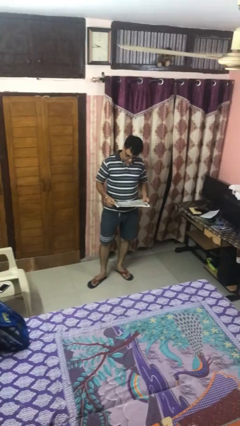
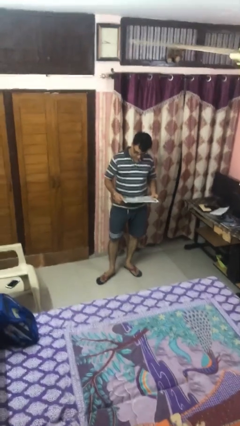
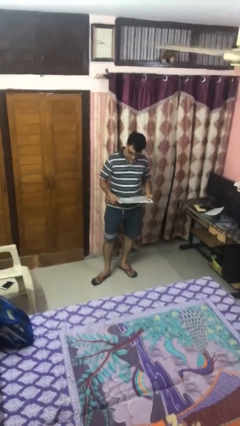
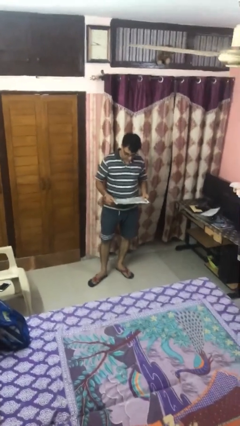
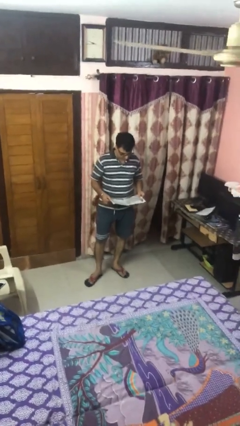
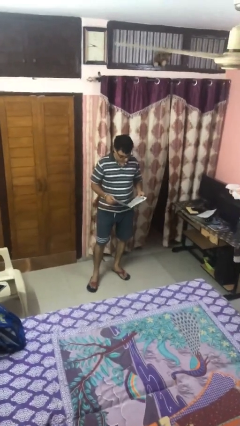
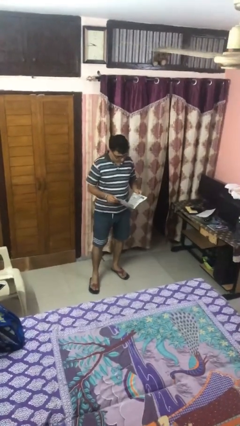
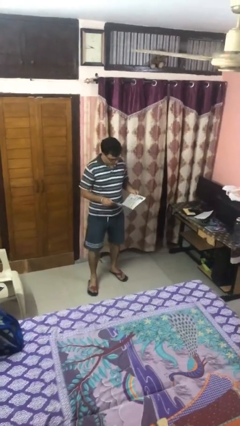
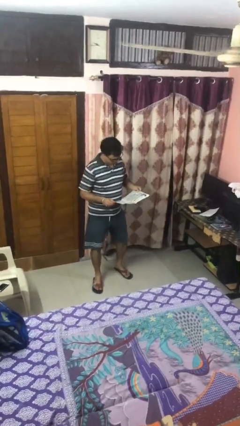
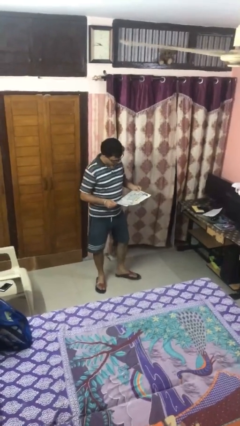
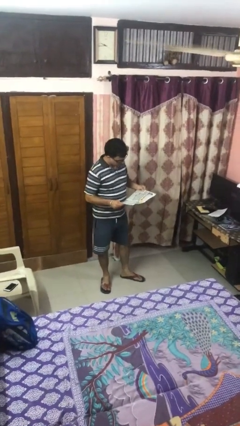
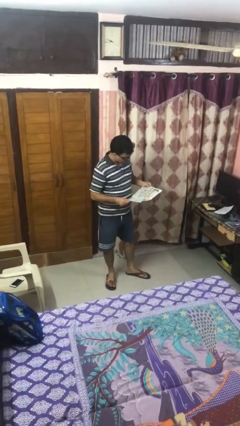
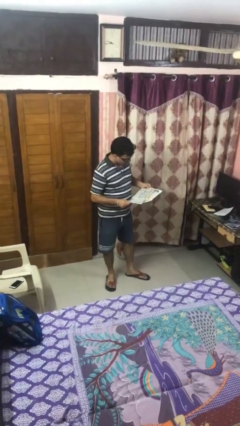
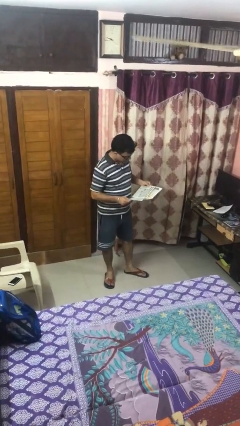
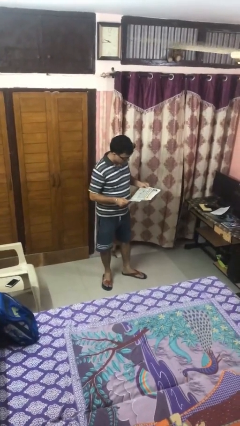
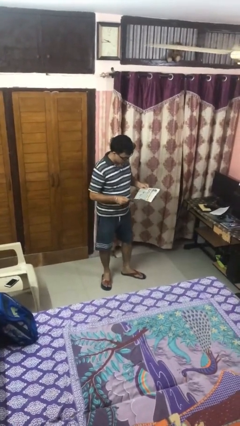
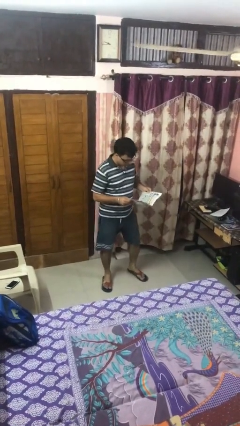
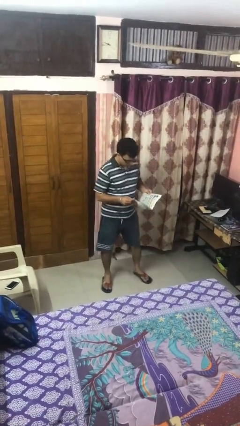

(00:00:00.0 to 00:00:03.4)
person reads newspaper

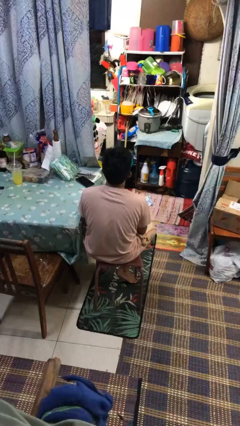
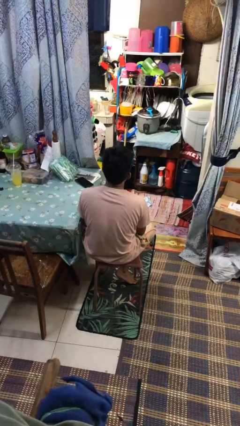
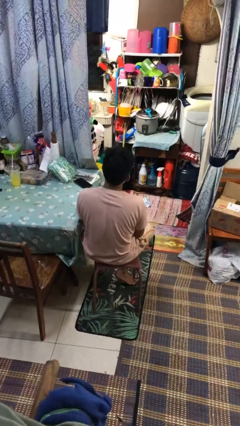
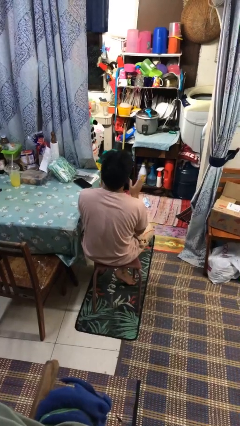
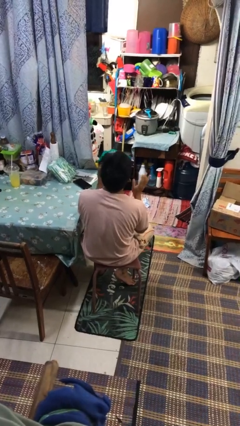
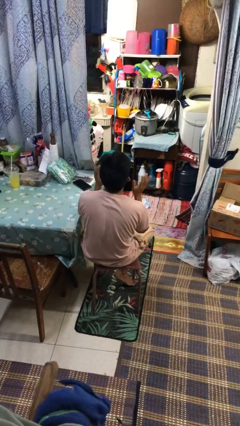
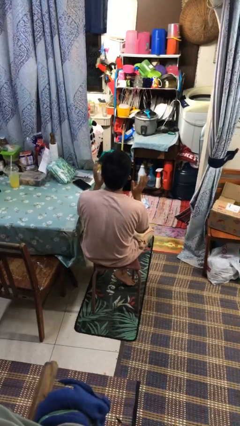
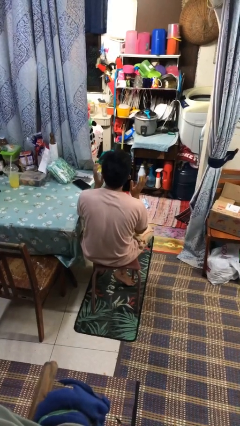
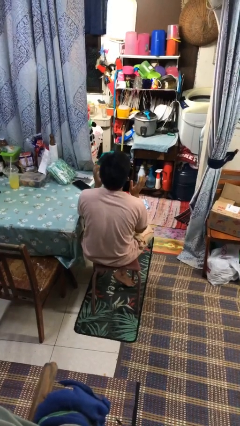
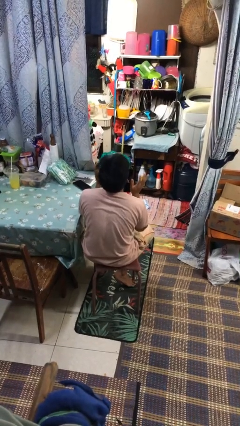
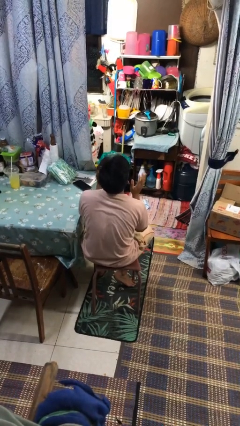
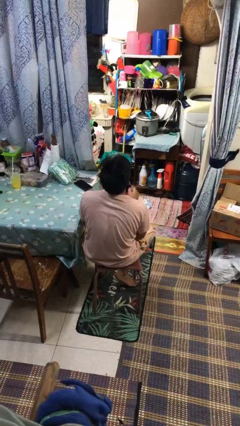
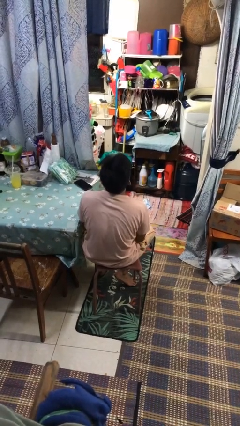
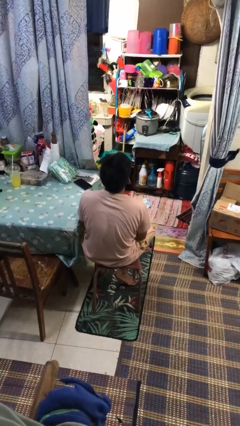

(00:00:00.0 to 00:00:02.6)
person sticks out tongue

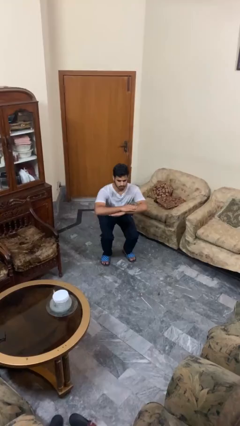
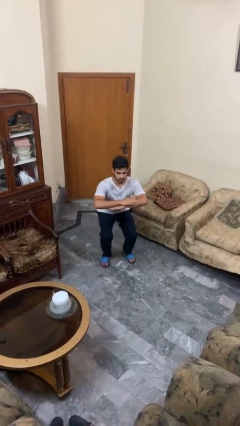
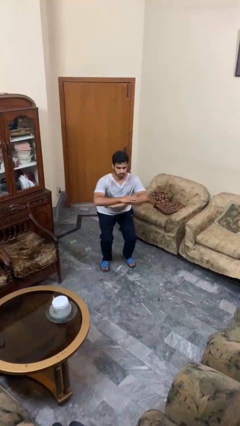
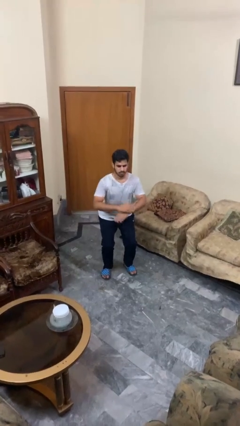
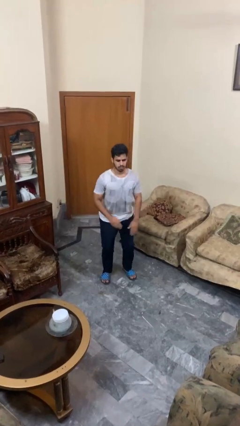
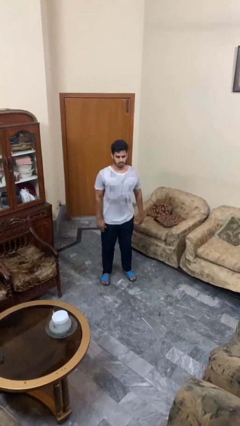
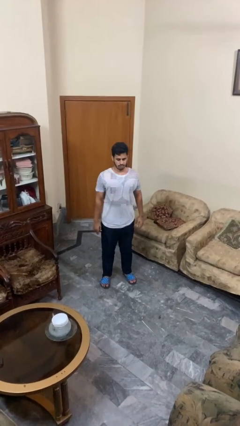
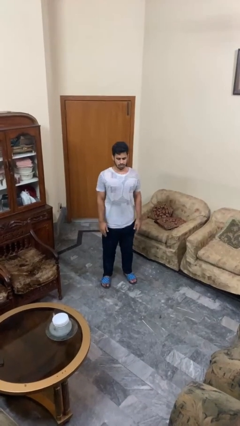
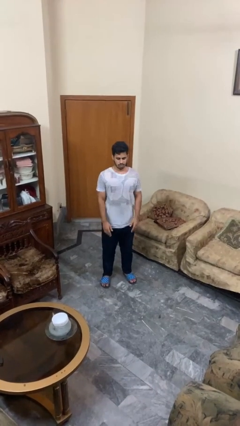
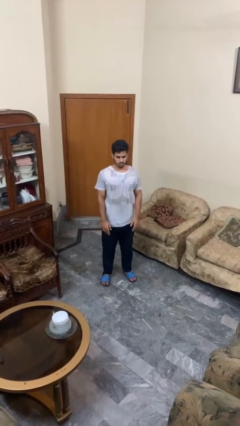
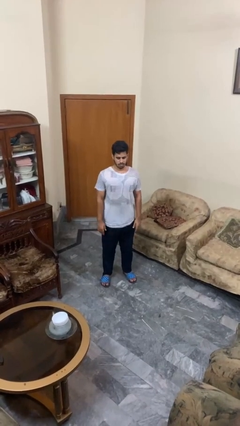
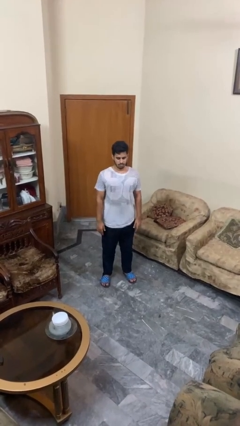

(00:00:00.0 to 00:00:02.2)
person stands up

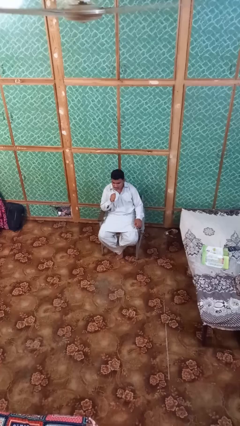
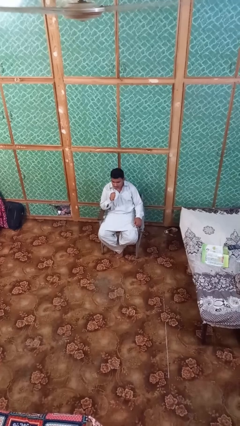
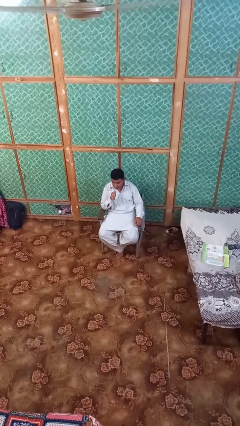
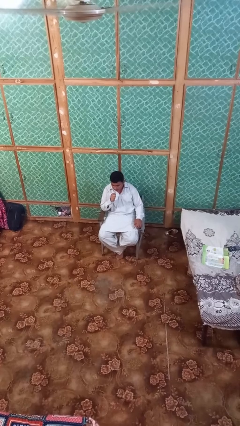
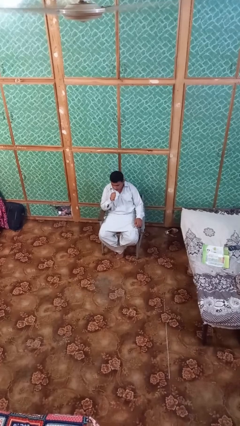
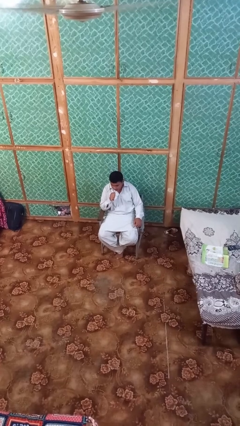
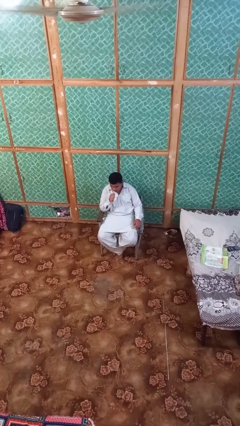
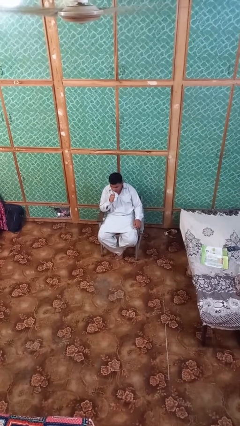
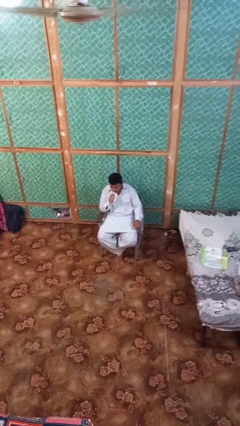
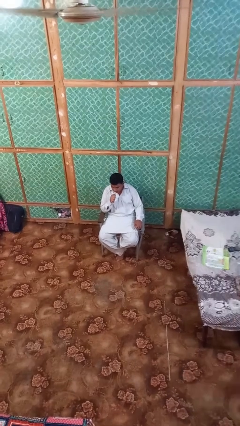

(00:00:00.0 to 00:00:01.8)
person vapes

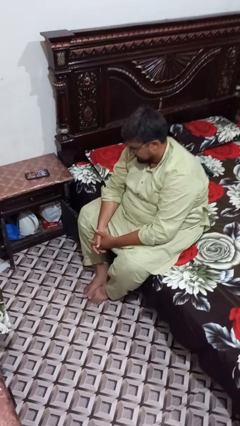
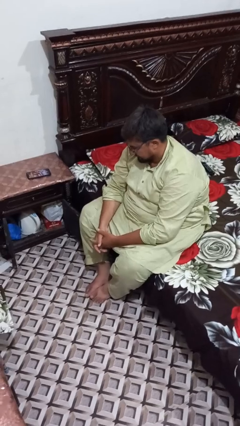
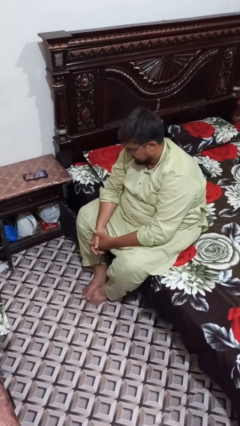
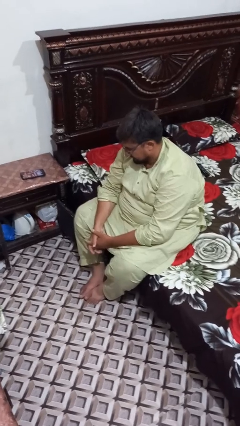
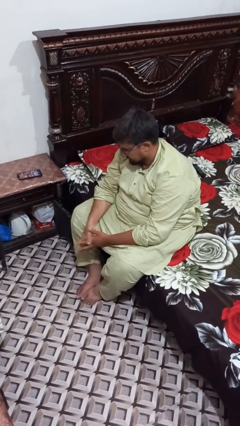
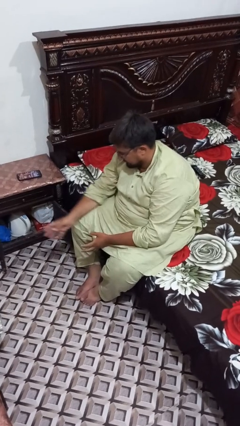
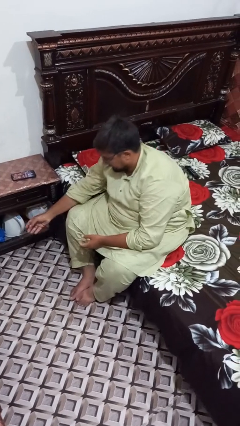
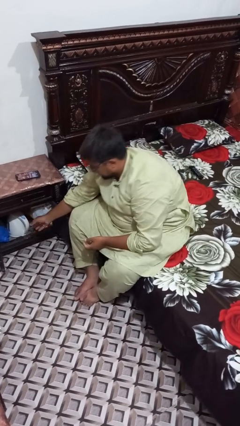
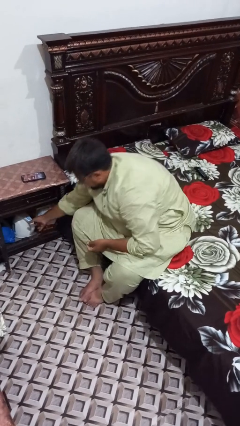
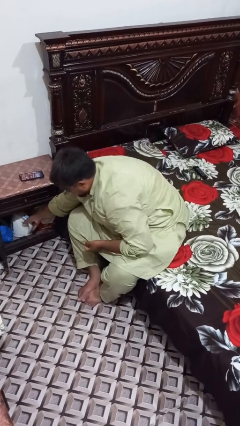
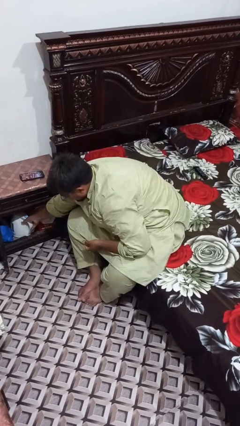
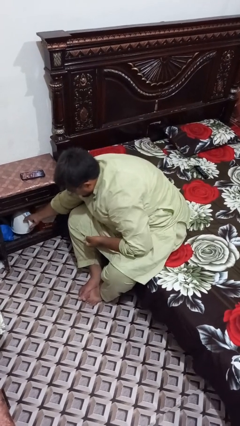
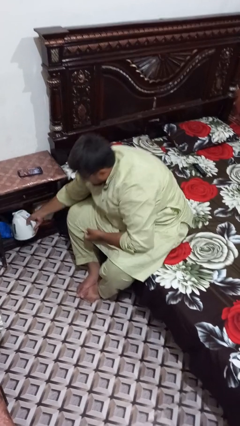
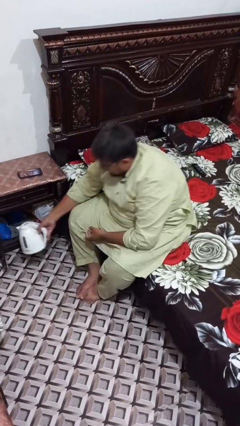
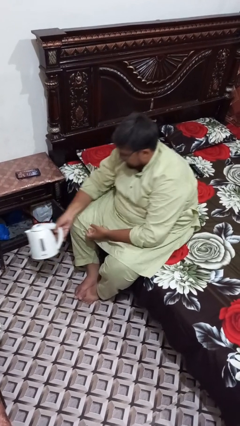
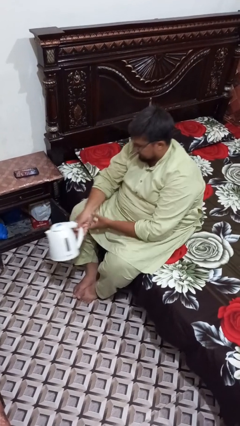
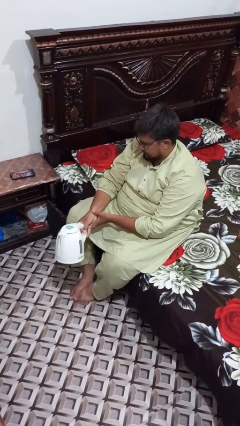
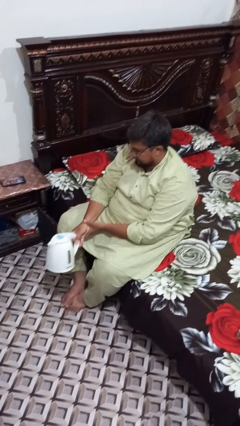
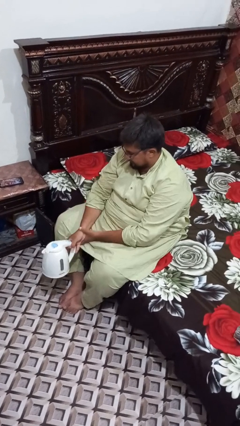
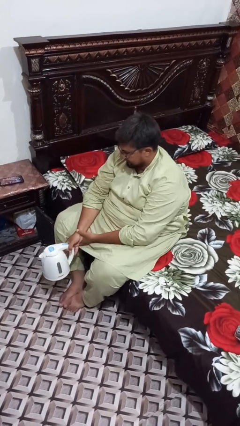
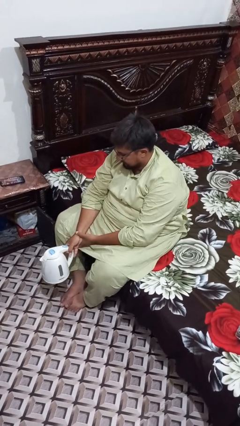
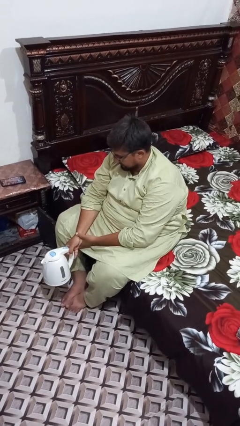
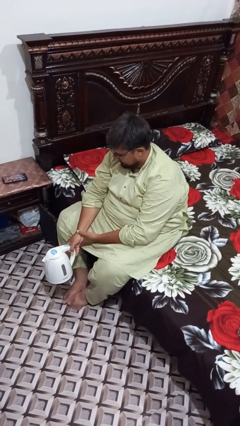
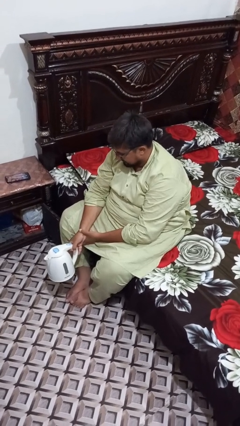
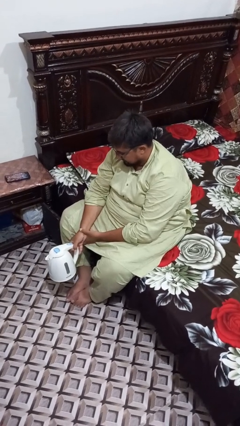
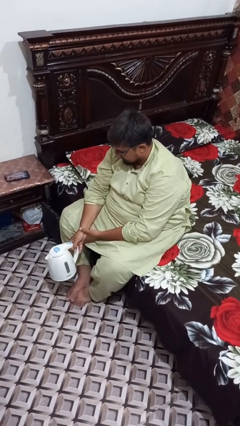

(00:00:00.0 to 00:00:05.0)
person picks up object from cabinet

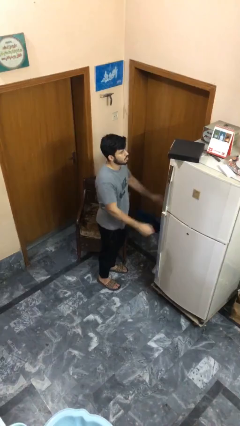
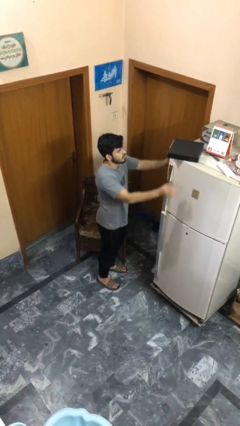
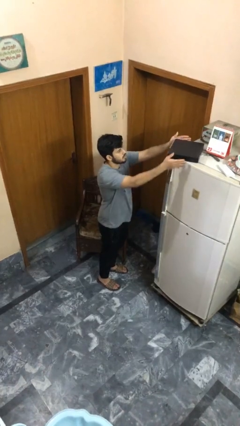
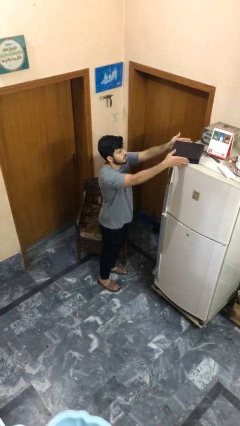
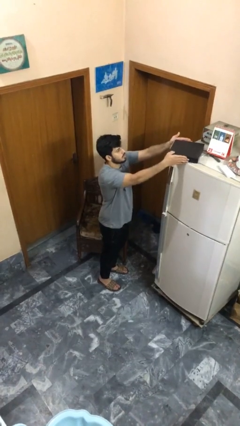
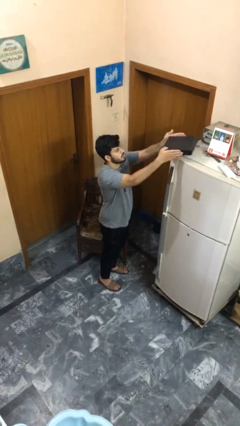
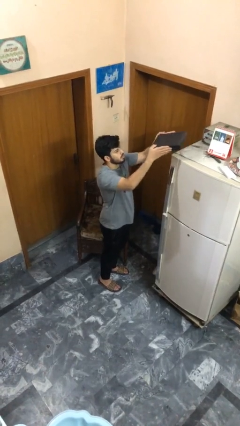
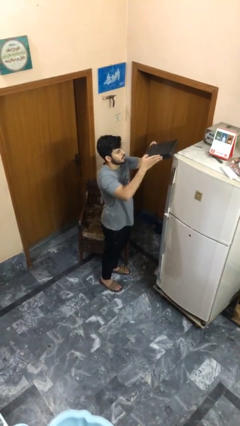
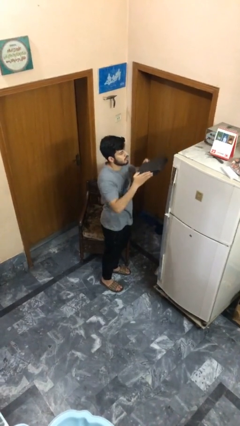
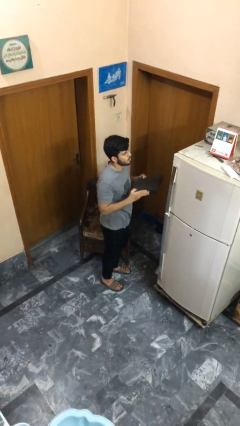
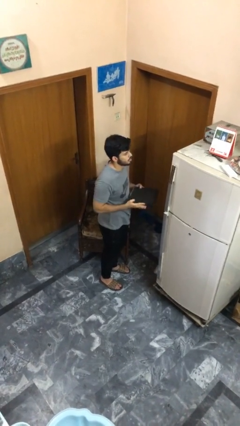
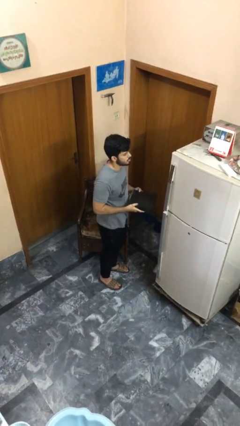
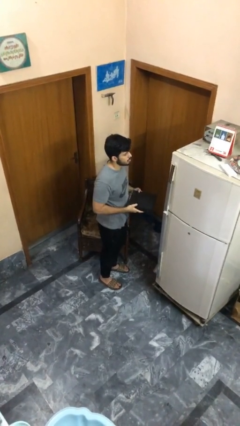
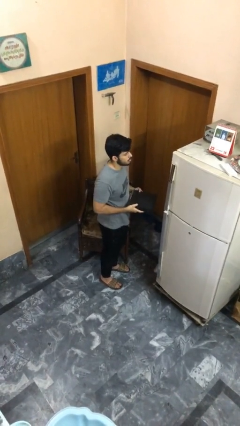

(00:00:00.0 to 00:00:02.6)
person picks up object from countertop
